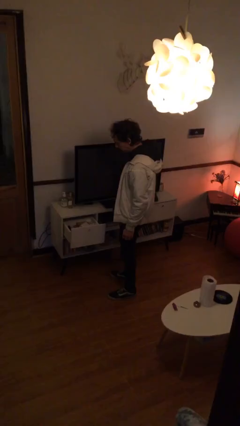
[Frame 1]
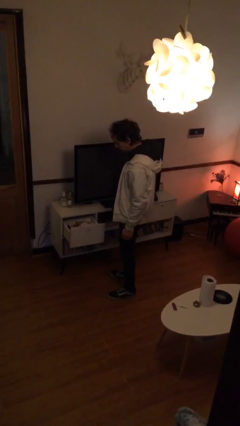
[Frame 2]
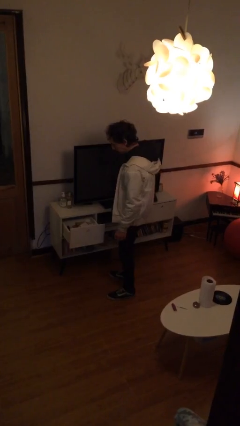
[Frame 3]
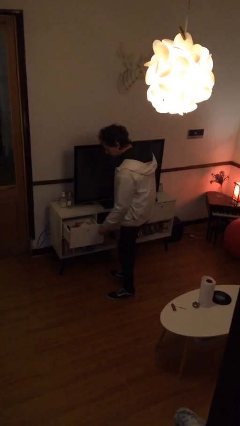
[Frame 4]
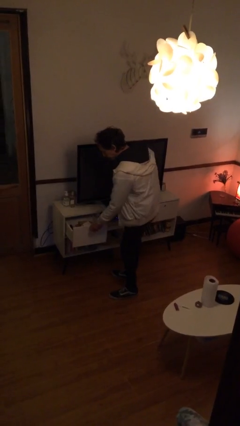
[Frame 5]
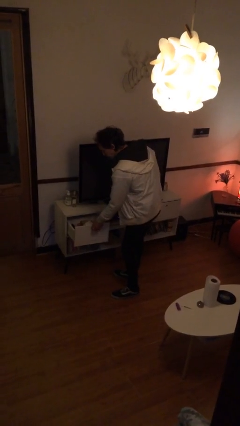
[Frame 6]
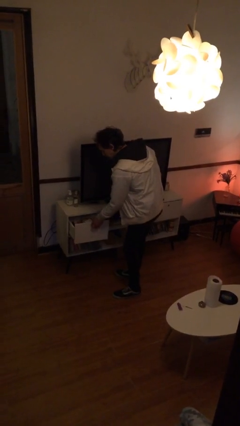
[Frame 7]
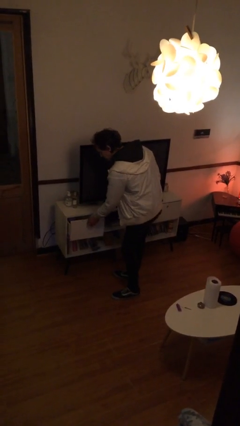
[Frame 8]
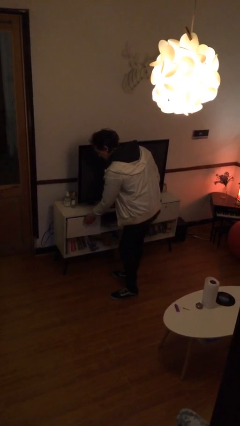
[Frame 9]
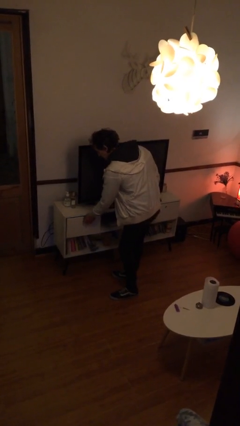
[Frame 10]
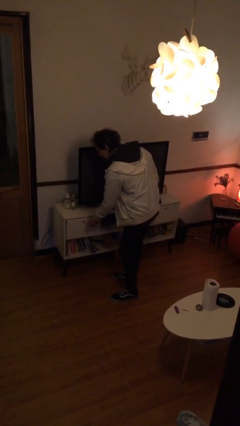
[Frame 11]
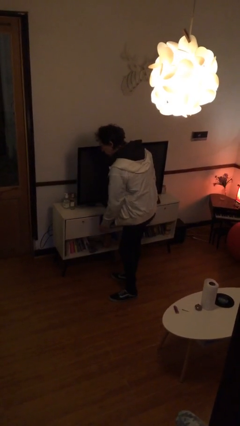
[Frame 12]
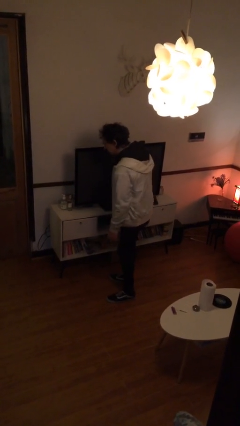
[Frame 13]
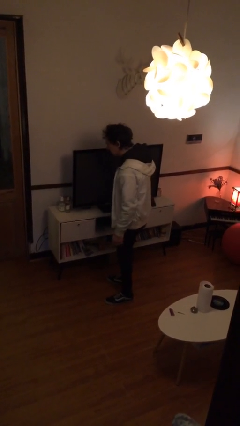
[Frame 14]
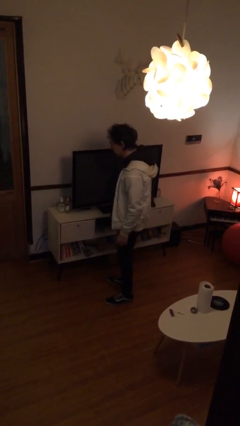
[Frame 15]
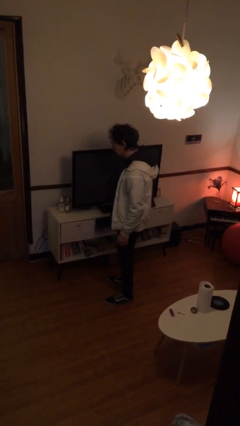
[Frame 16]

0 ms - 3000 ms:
person closes dresser drawer

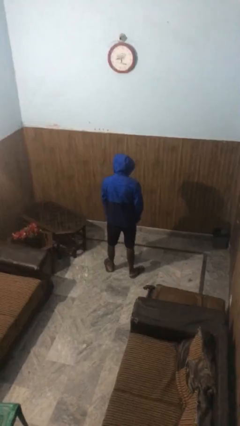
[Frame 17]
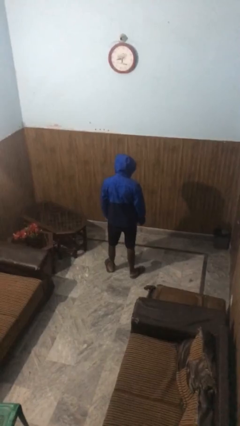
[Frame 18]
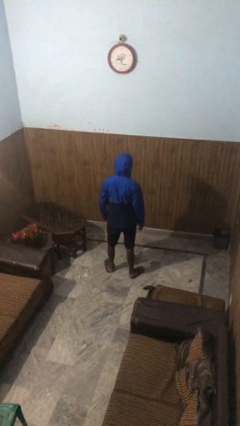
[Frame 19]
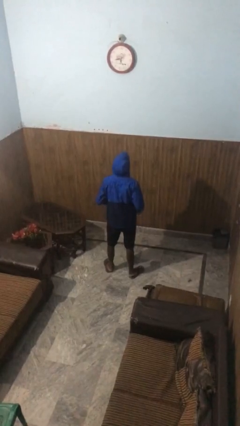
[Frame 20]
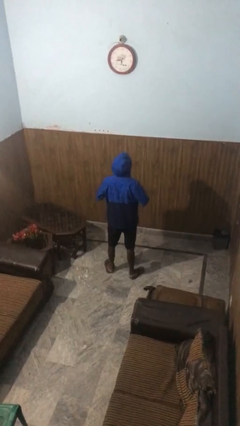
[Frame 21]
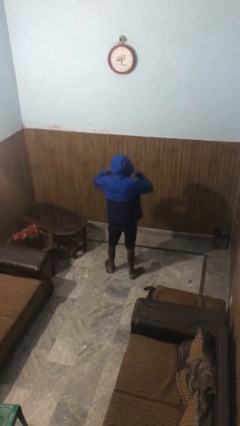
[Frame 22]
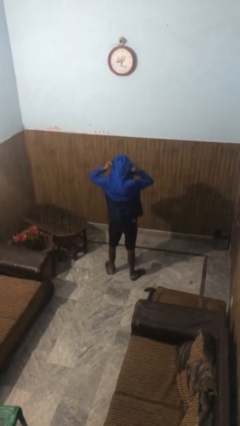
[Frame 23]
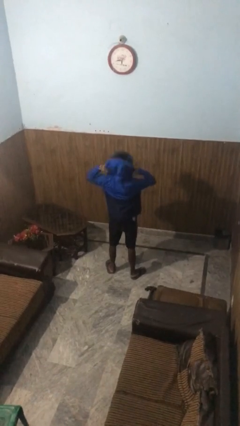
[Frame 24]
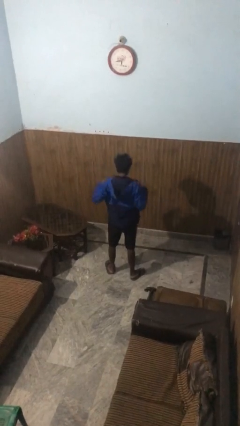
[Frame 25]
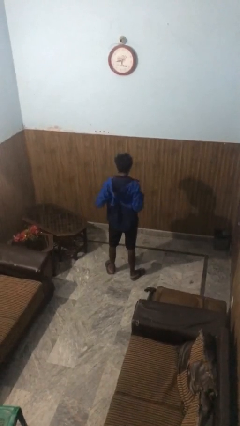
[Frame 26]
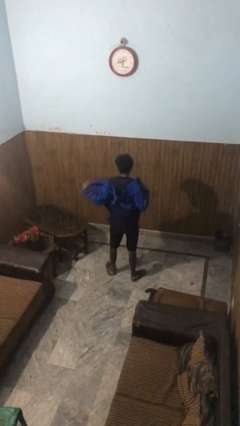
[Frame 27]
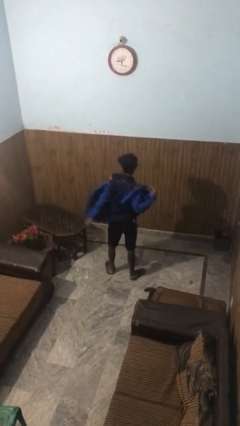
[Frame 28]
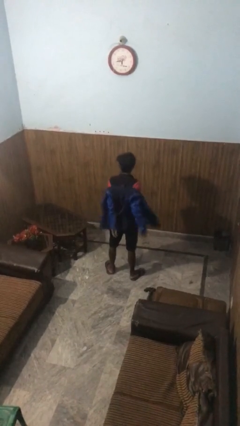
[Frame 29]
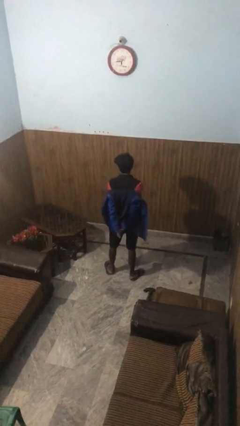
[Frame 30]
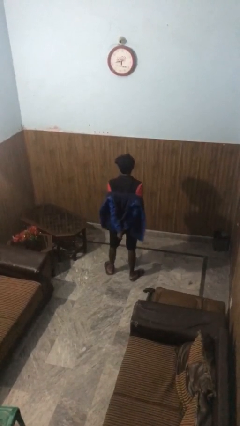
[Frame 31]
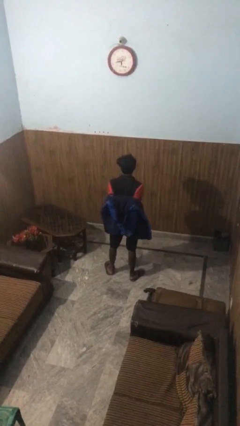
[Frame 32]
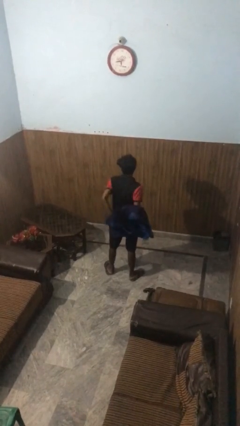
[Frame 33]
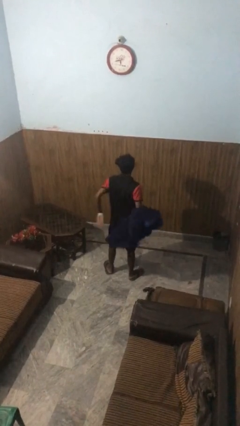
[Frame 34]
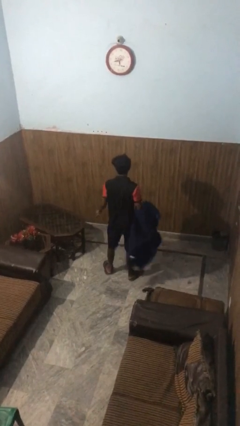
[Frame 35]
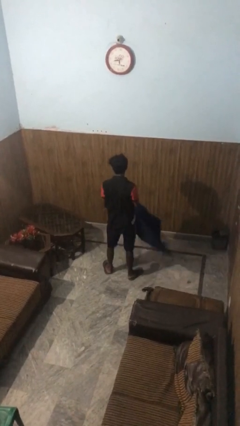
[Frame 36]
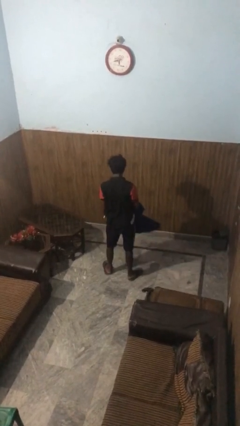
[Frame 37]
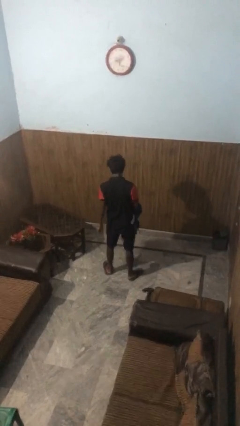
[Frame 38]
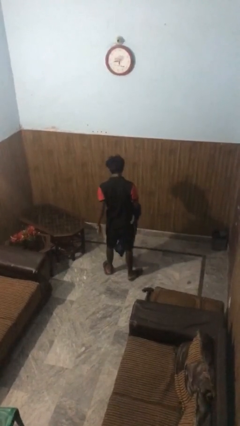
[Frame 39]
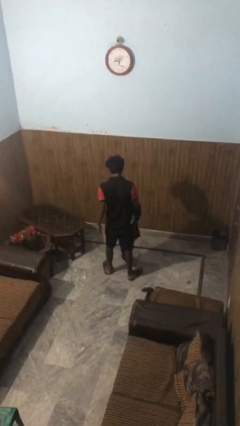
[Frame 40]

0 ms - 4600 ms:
person takes off hoodie

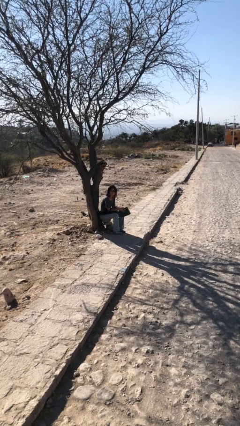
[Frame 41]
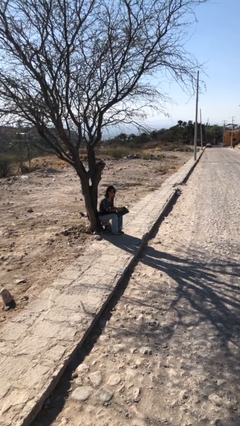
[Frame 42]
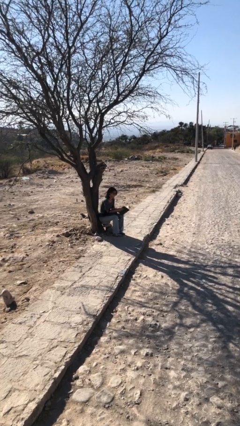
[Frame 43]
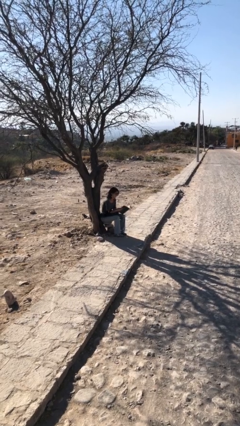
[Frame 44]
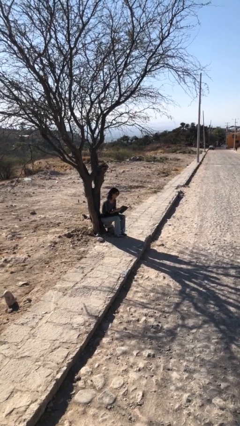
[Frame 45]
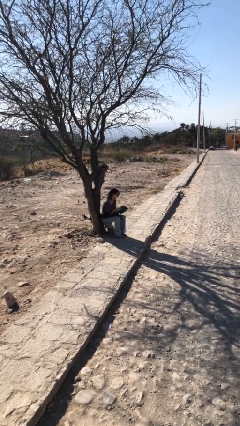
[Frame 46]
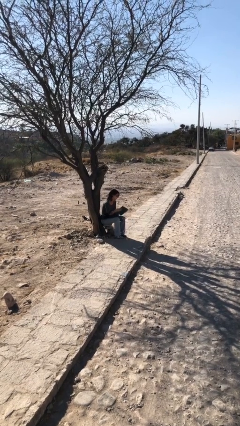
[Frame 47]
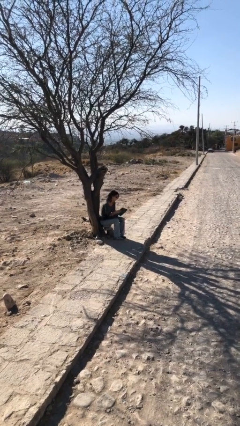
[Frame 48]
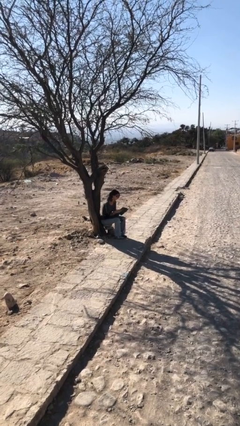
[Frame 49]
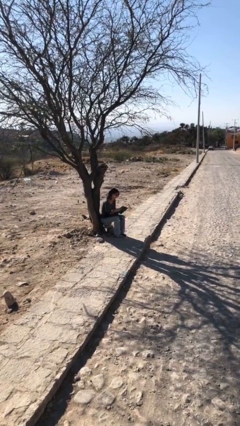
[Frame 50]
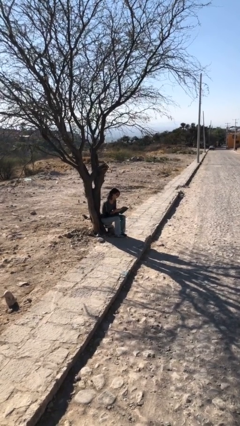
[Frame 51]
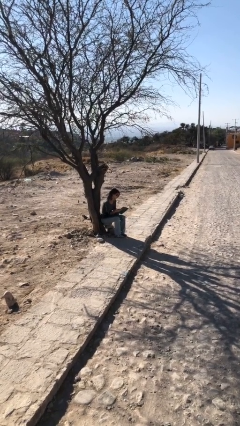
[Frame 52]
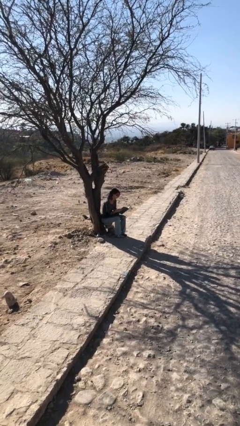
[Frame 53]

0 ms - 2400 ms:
person reads document

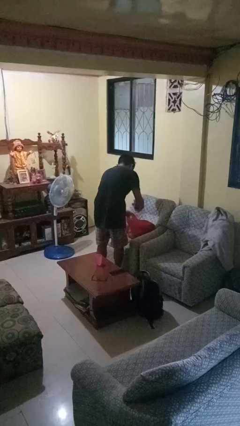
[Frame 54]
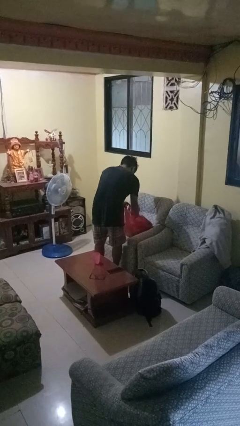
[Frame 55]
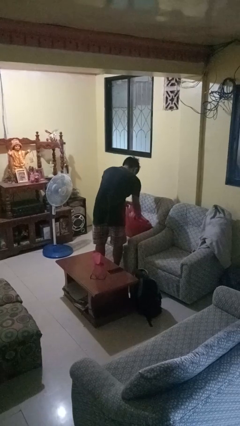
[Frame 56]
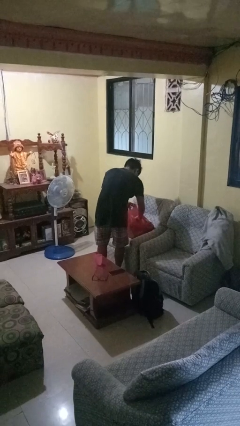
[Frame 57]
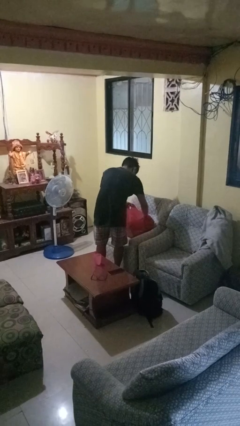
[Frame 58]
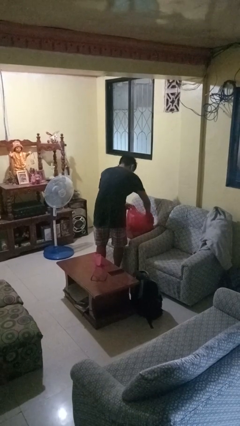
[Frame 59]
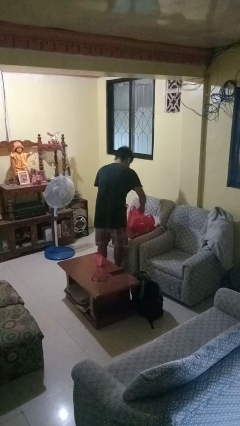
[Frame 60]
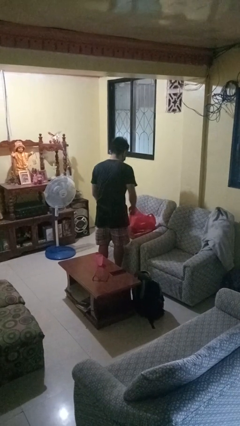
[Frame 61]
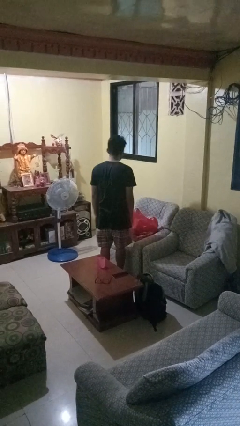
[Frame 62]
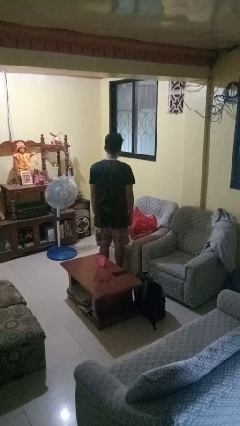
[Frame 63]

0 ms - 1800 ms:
person puts object into bag

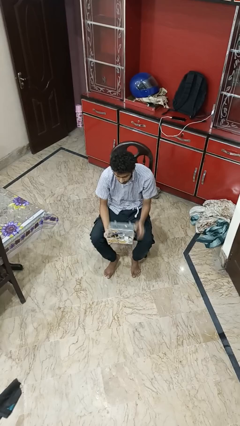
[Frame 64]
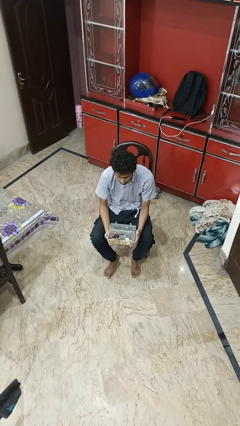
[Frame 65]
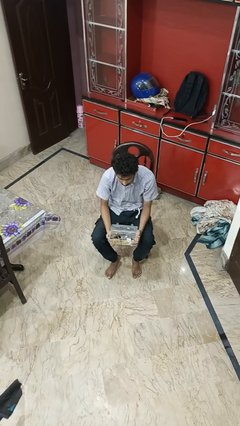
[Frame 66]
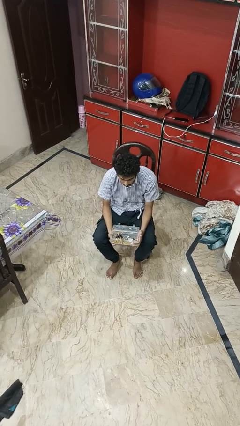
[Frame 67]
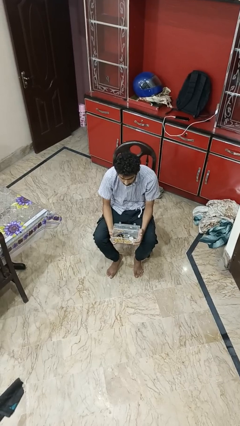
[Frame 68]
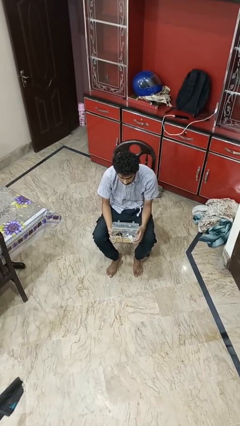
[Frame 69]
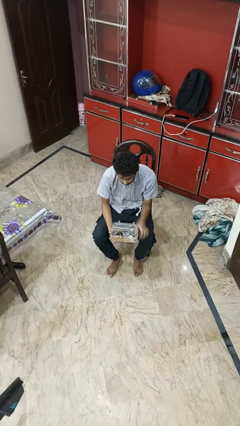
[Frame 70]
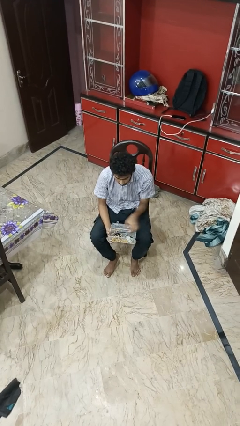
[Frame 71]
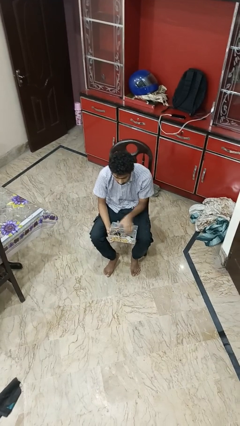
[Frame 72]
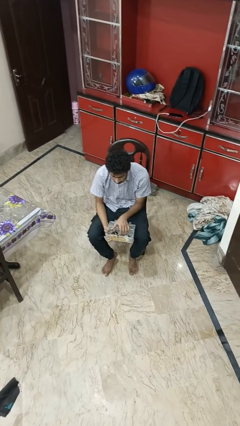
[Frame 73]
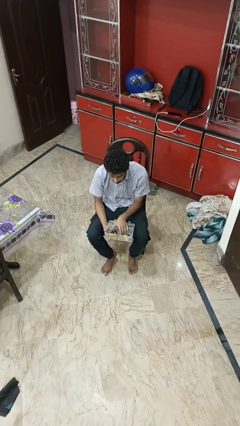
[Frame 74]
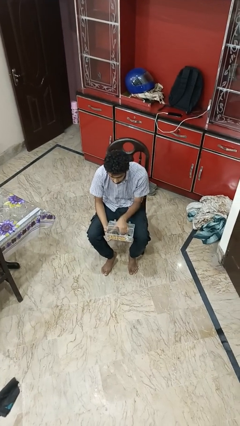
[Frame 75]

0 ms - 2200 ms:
person opens jewelry box

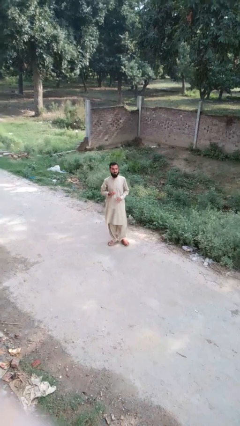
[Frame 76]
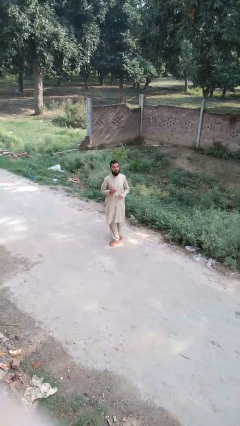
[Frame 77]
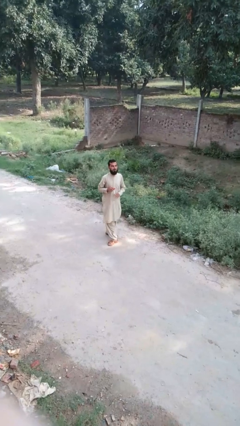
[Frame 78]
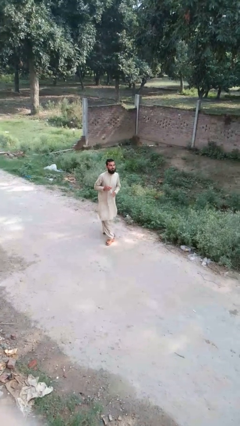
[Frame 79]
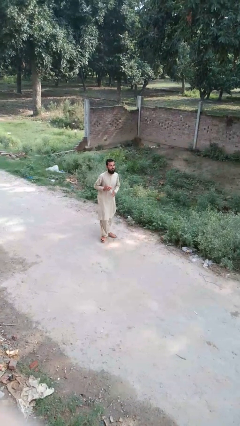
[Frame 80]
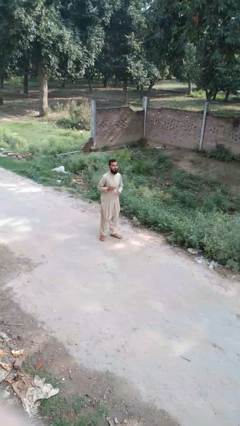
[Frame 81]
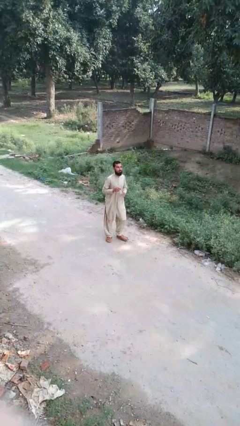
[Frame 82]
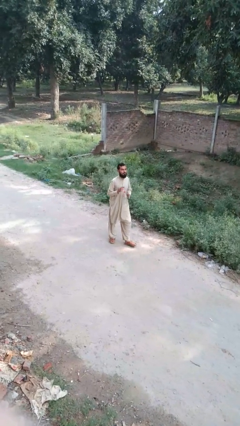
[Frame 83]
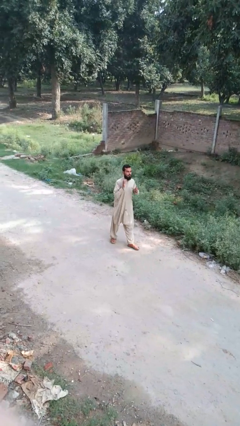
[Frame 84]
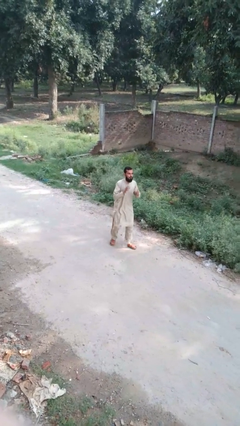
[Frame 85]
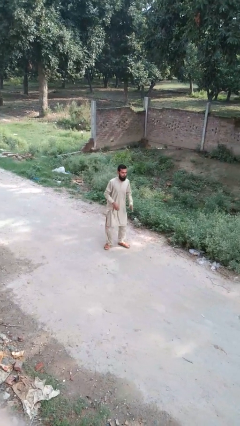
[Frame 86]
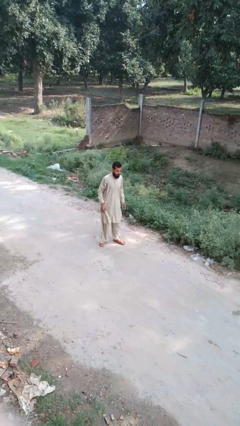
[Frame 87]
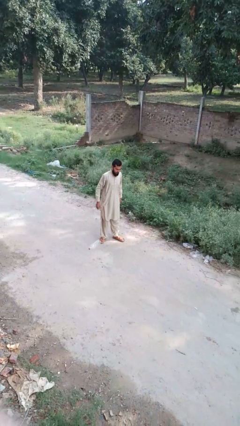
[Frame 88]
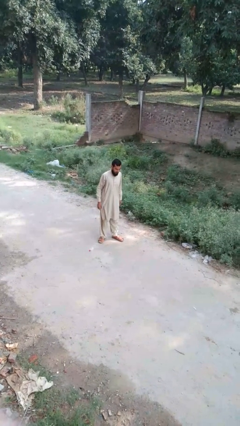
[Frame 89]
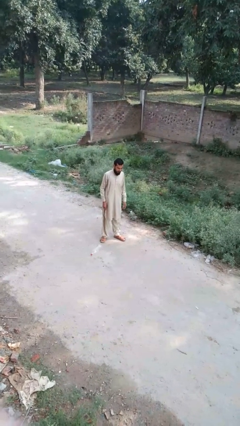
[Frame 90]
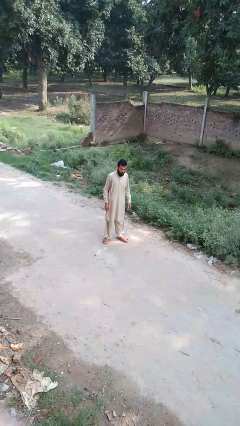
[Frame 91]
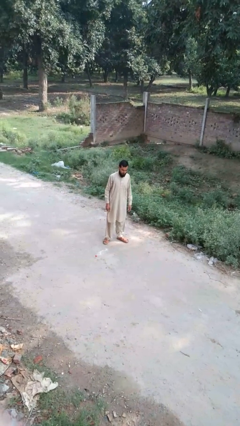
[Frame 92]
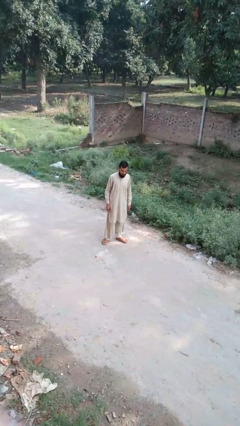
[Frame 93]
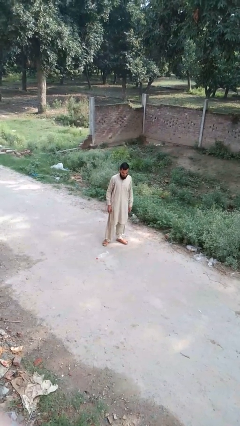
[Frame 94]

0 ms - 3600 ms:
person drops object
